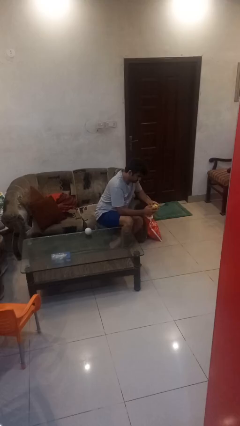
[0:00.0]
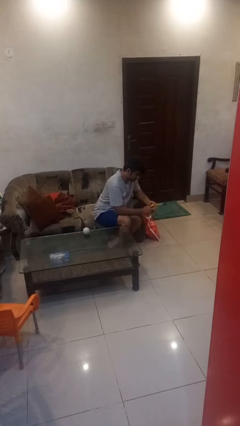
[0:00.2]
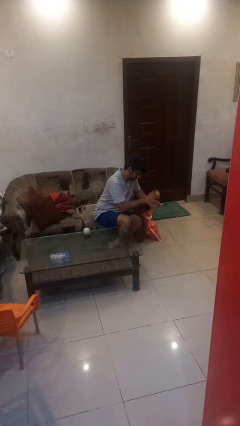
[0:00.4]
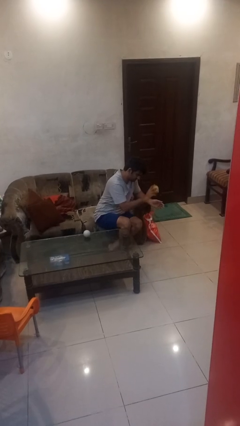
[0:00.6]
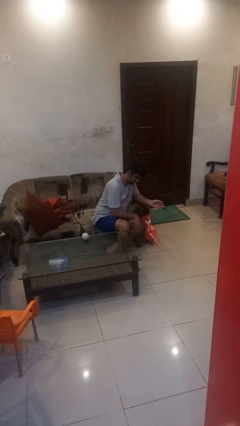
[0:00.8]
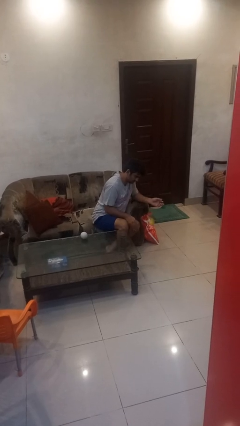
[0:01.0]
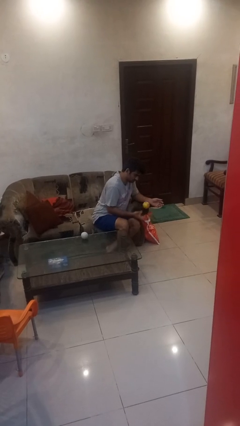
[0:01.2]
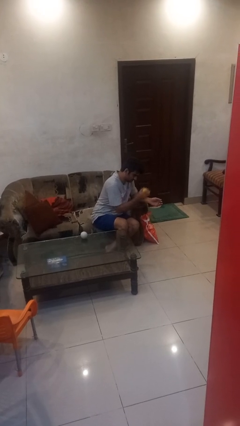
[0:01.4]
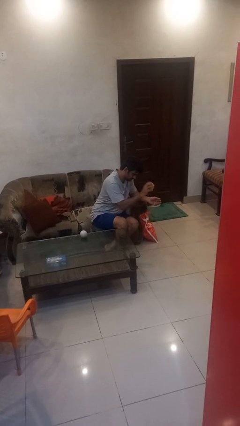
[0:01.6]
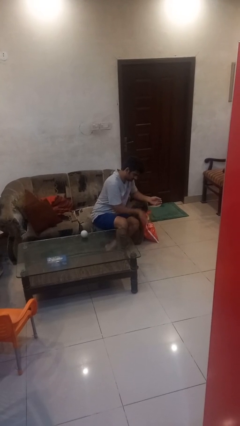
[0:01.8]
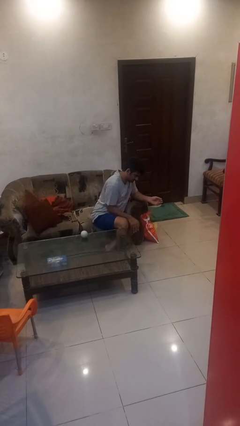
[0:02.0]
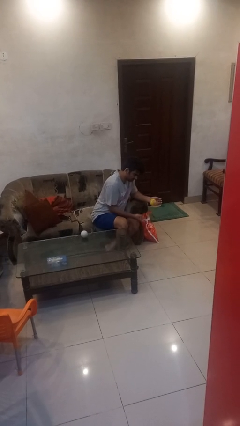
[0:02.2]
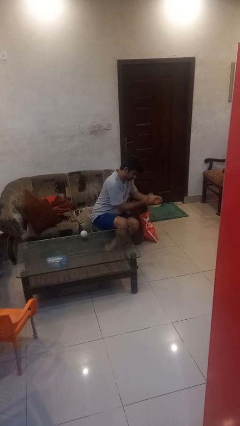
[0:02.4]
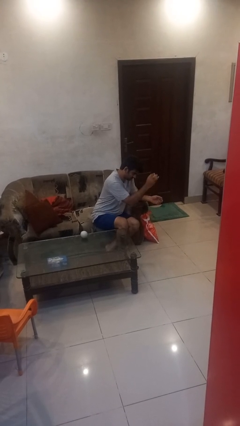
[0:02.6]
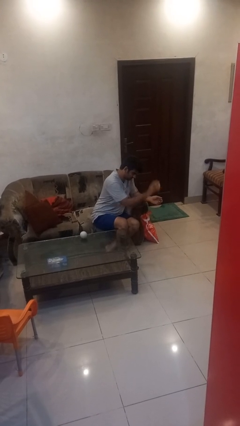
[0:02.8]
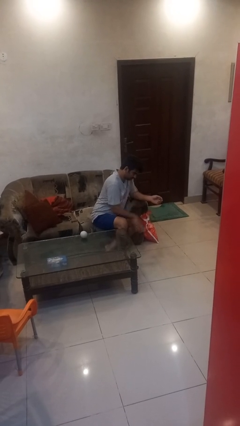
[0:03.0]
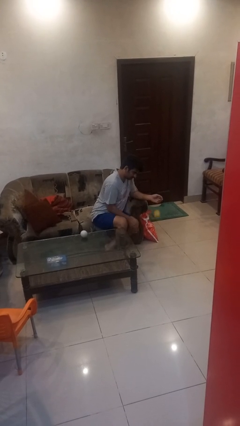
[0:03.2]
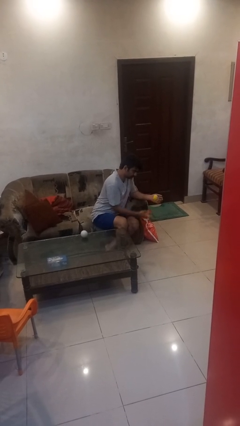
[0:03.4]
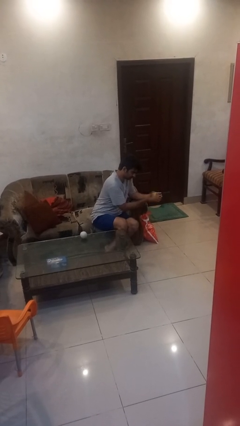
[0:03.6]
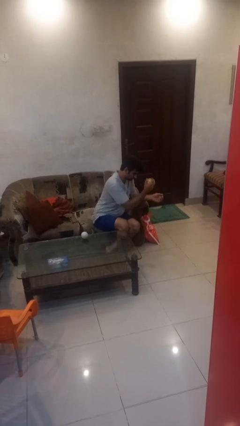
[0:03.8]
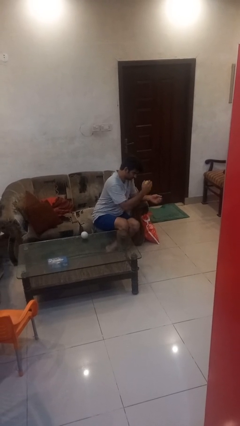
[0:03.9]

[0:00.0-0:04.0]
person bounces ball on floor

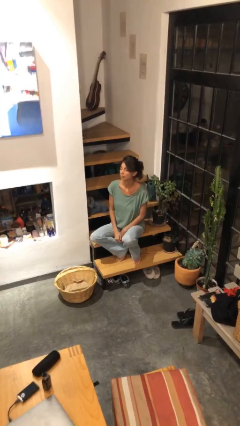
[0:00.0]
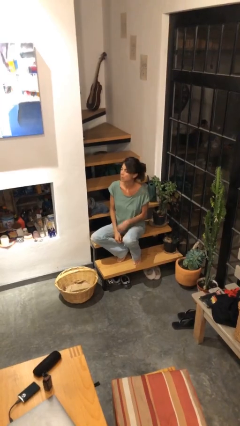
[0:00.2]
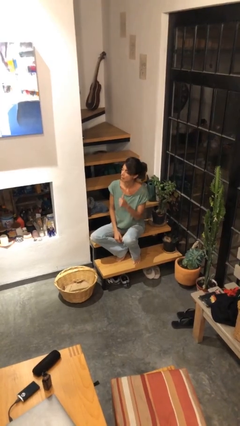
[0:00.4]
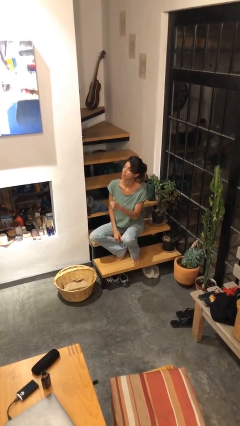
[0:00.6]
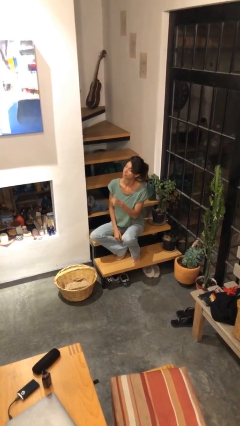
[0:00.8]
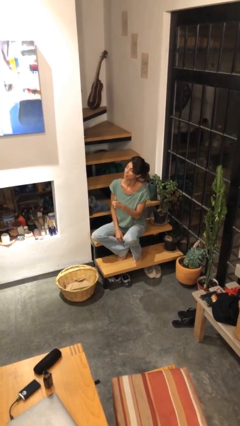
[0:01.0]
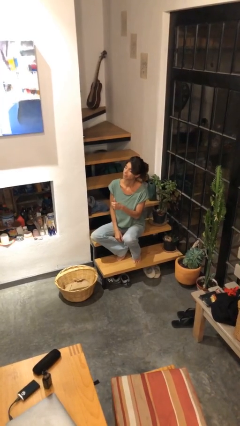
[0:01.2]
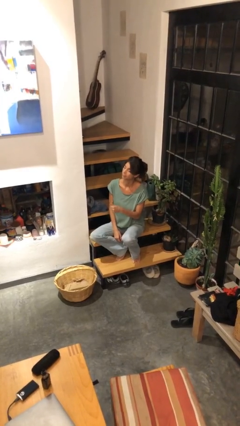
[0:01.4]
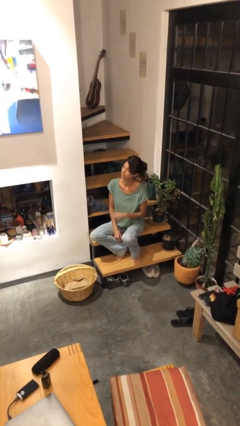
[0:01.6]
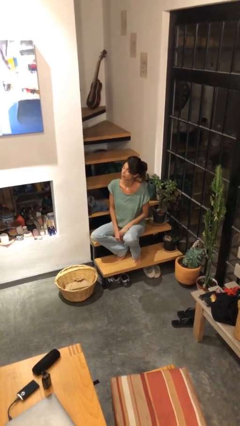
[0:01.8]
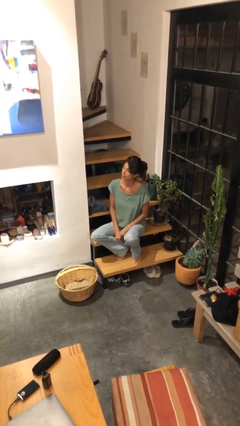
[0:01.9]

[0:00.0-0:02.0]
person gestures thumbs up

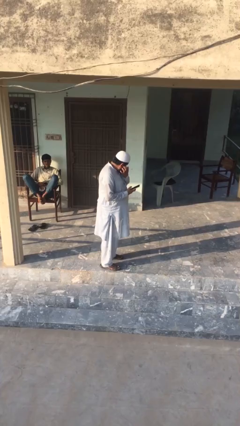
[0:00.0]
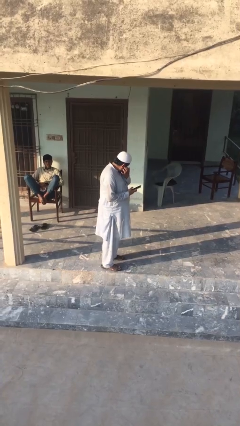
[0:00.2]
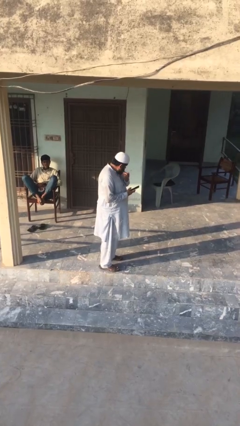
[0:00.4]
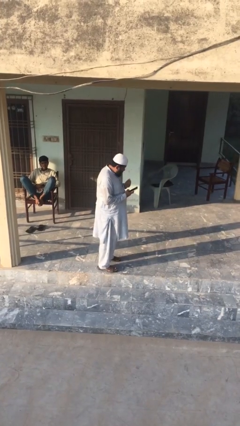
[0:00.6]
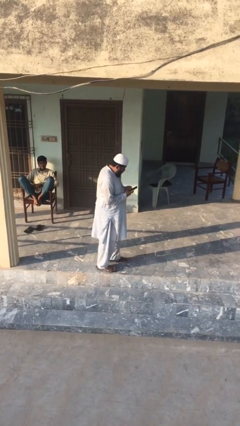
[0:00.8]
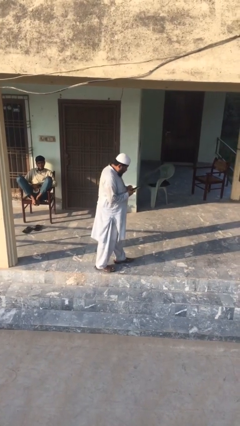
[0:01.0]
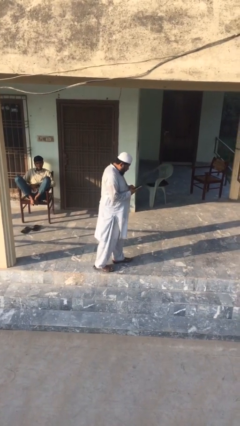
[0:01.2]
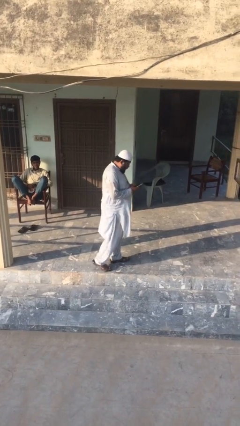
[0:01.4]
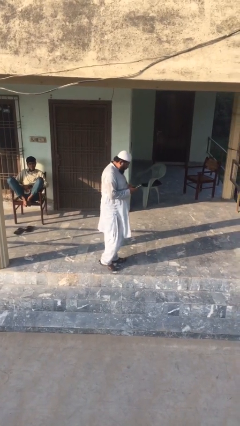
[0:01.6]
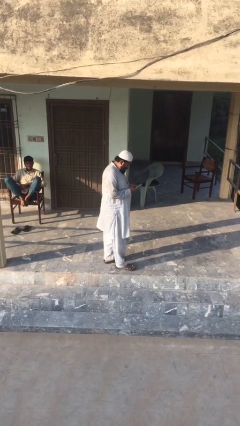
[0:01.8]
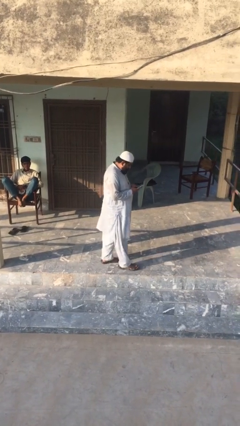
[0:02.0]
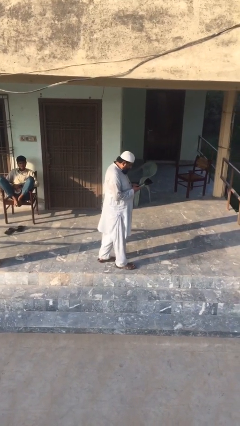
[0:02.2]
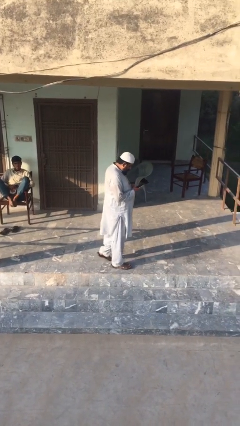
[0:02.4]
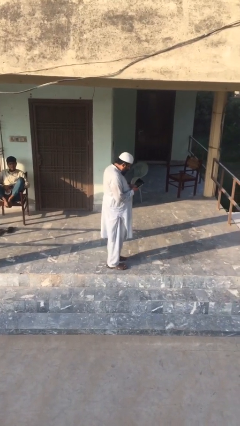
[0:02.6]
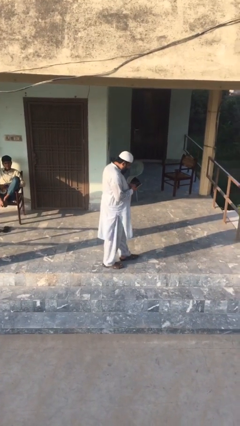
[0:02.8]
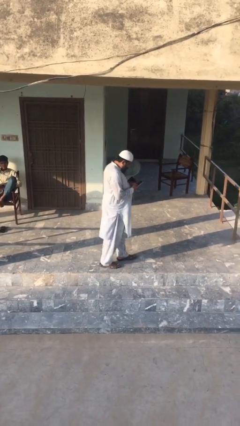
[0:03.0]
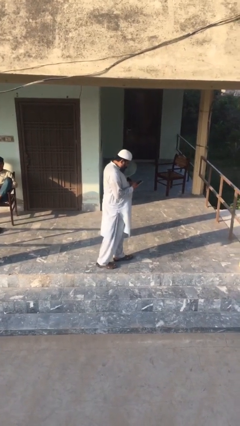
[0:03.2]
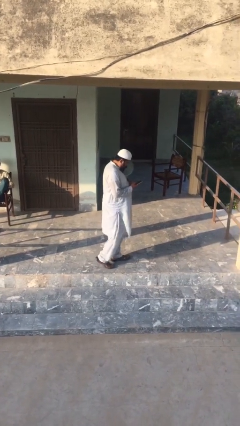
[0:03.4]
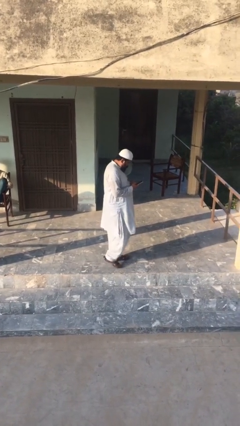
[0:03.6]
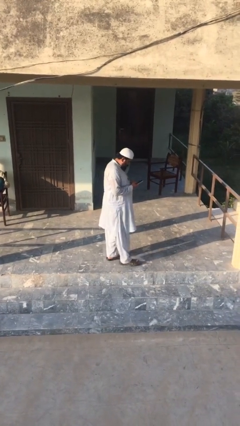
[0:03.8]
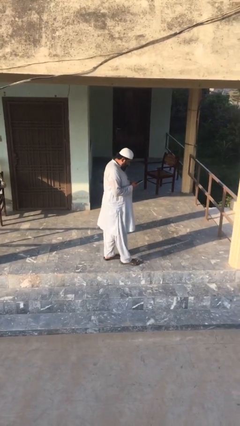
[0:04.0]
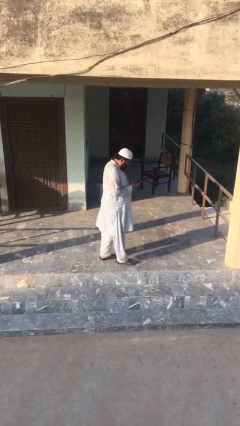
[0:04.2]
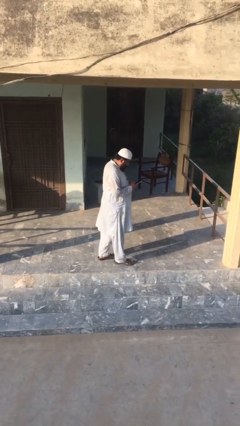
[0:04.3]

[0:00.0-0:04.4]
person texts on phone

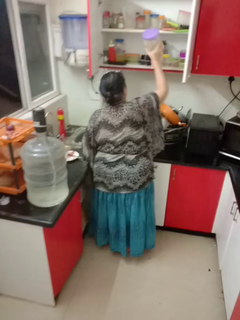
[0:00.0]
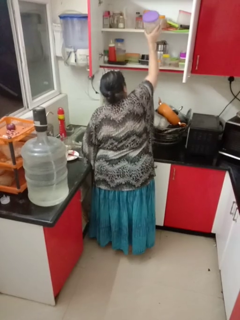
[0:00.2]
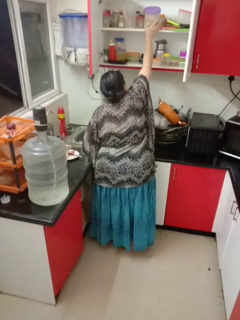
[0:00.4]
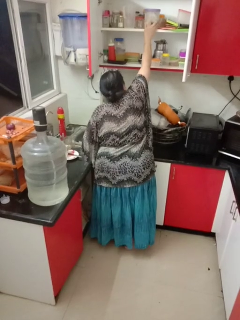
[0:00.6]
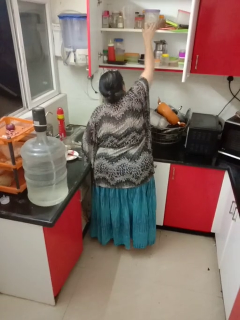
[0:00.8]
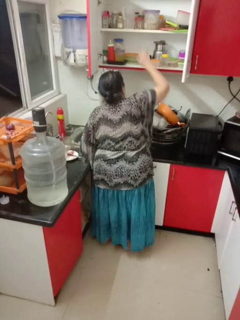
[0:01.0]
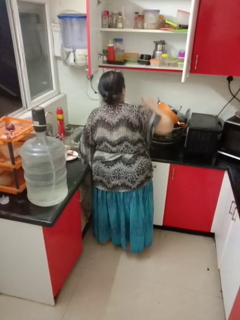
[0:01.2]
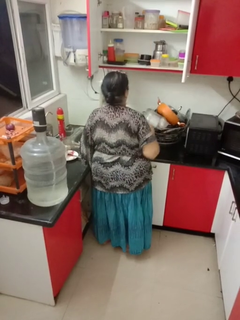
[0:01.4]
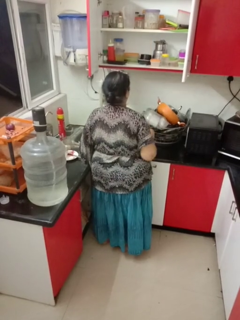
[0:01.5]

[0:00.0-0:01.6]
person puts object in cabinet

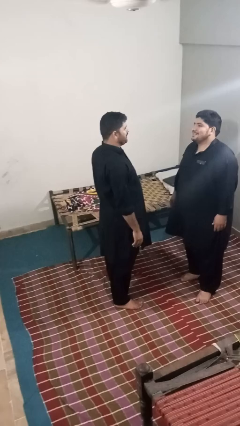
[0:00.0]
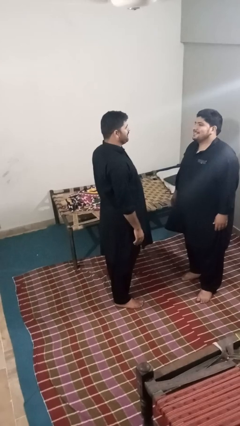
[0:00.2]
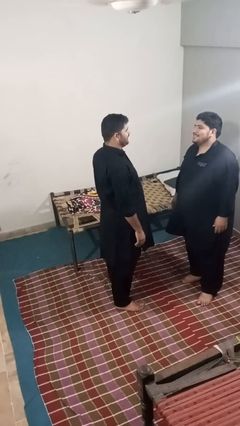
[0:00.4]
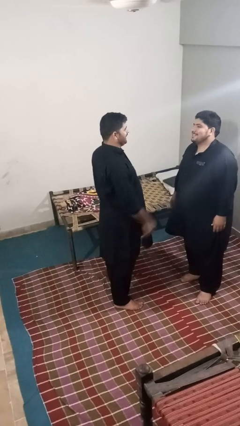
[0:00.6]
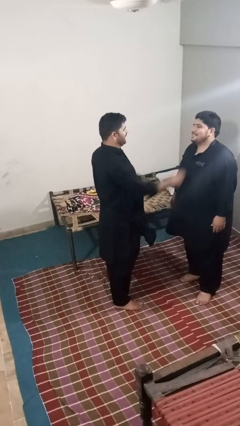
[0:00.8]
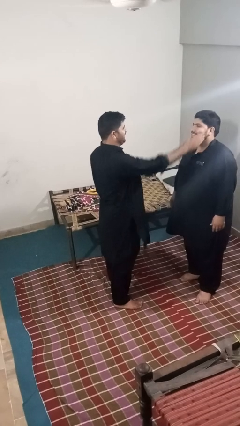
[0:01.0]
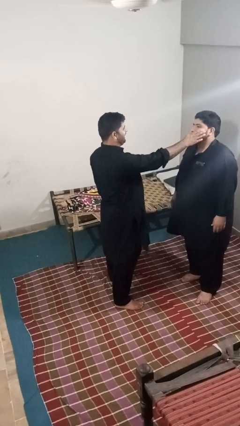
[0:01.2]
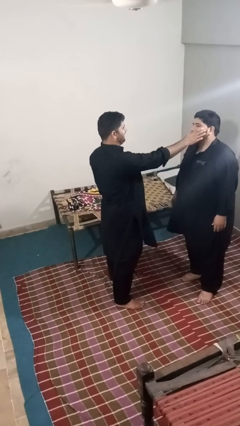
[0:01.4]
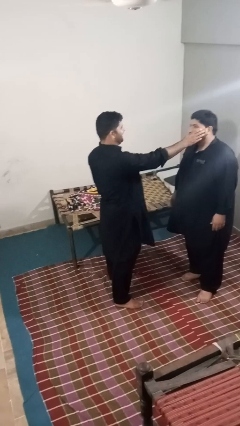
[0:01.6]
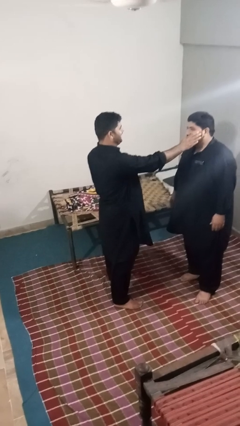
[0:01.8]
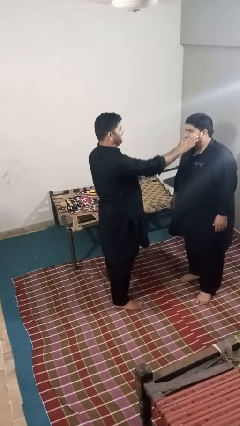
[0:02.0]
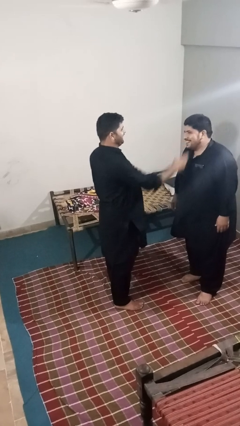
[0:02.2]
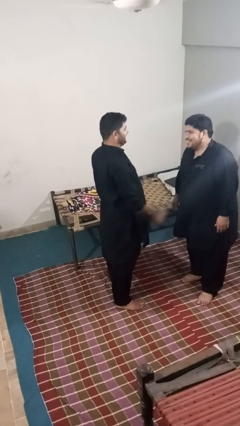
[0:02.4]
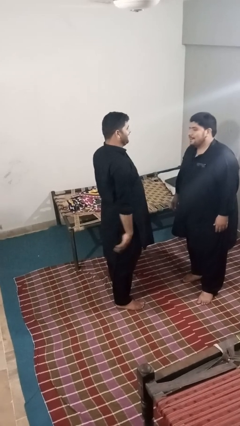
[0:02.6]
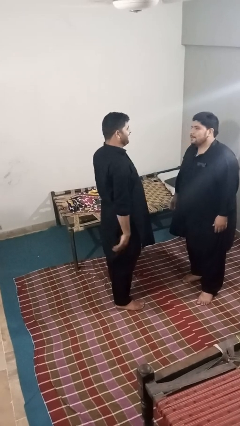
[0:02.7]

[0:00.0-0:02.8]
person touches face of person

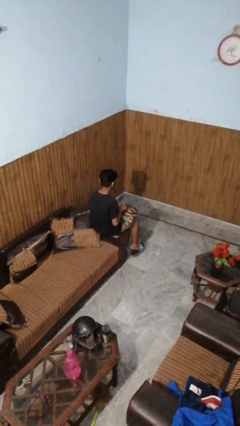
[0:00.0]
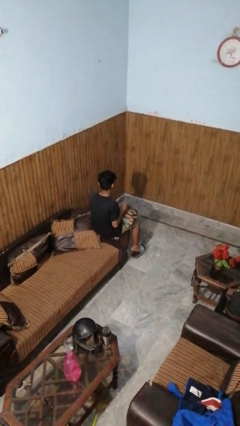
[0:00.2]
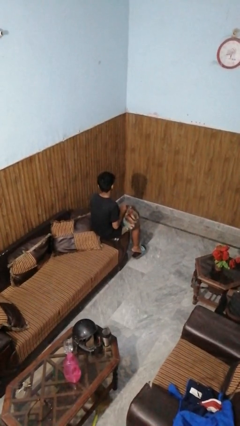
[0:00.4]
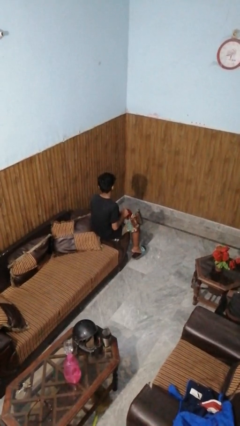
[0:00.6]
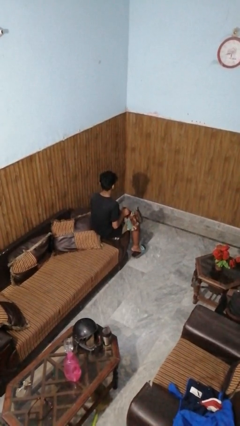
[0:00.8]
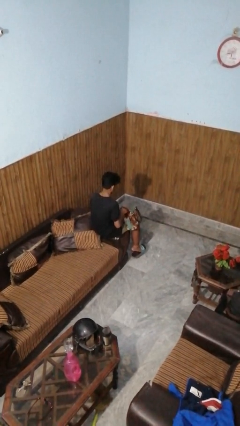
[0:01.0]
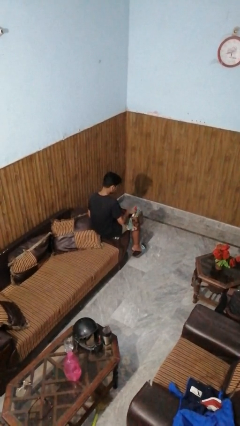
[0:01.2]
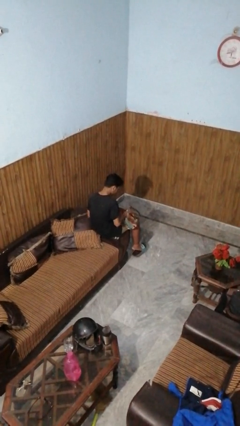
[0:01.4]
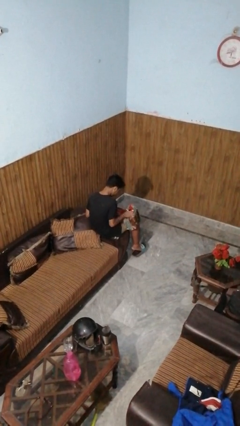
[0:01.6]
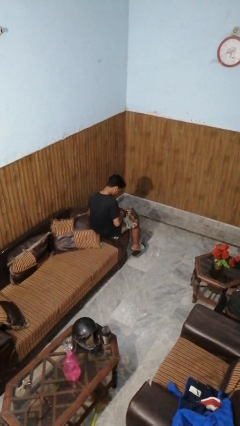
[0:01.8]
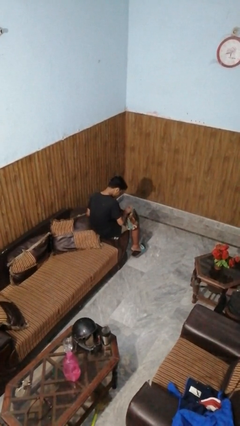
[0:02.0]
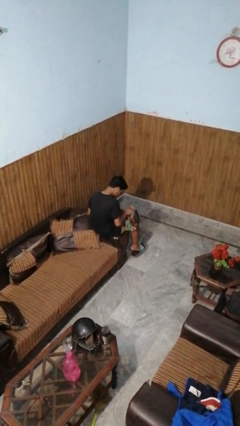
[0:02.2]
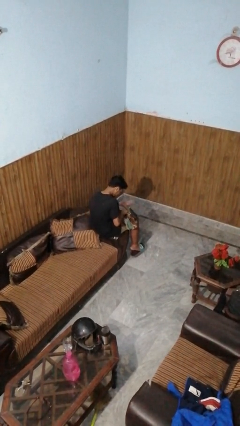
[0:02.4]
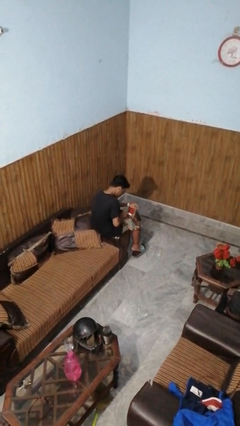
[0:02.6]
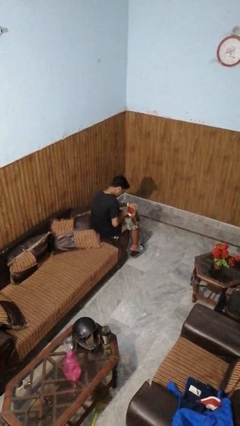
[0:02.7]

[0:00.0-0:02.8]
person searches in purse

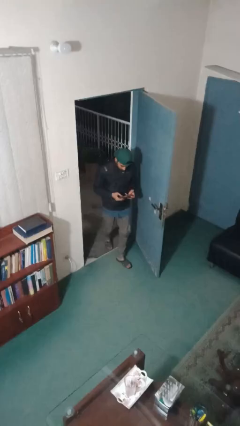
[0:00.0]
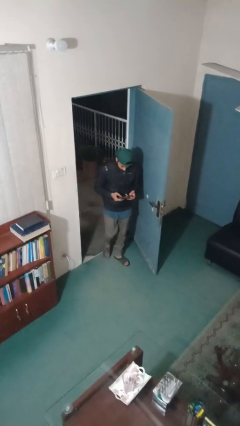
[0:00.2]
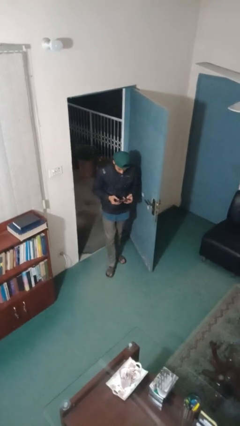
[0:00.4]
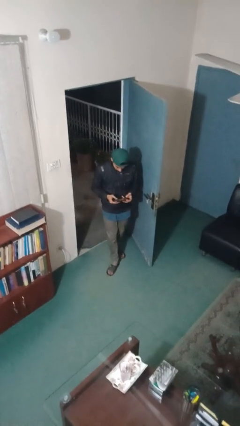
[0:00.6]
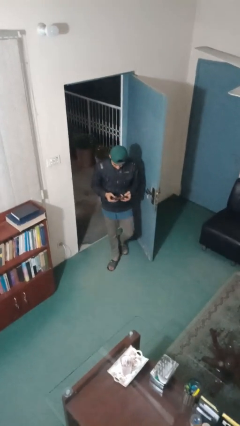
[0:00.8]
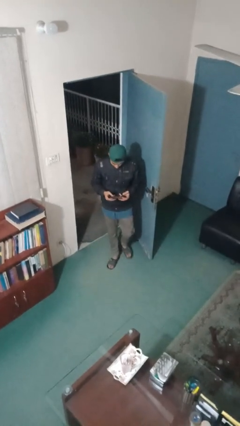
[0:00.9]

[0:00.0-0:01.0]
person enters scene through structure
